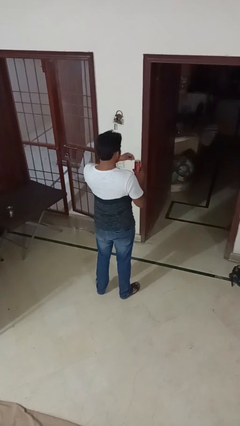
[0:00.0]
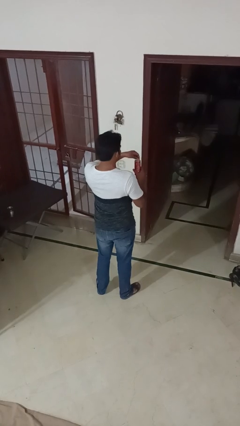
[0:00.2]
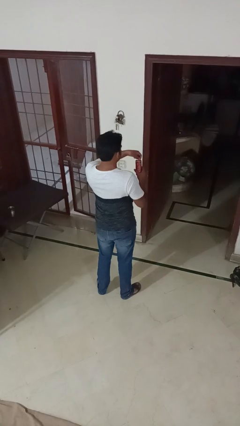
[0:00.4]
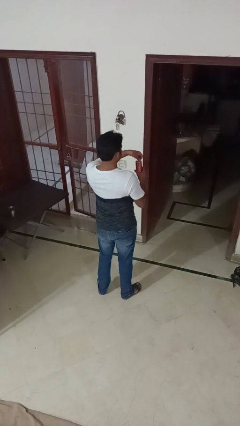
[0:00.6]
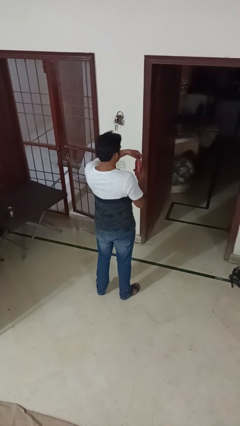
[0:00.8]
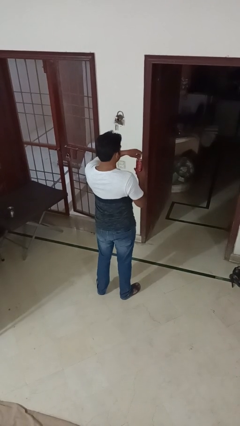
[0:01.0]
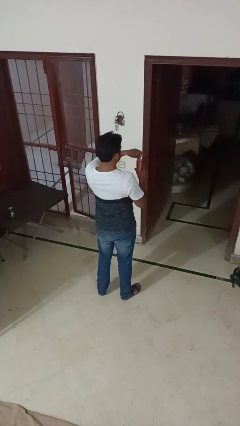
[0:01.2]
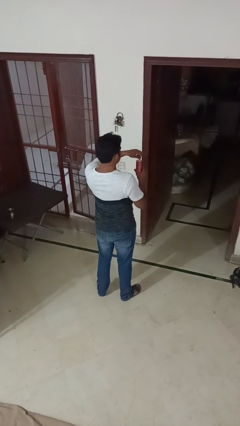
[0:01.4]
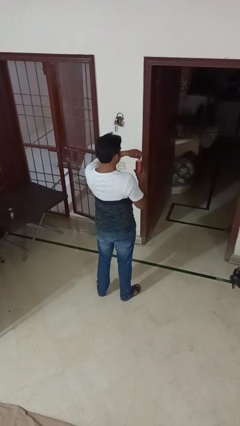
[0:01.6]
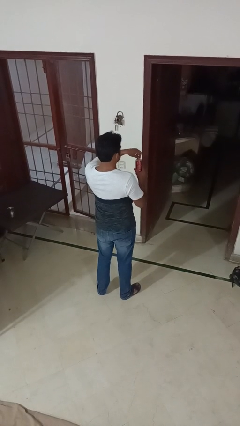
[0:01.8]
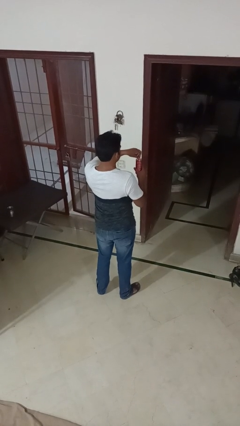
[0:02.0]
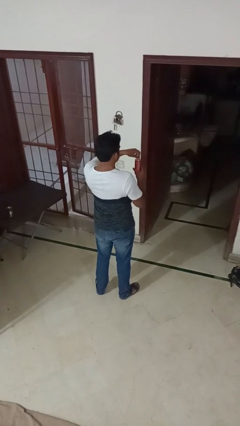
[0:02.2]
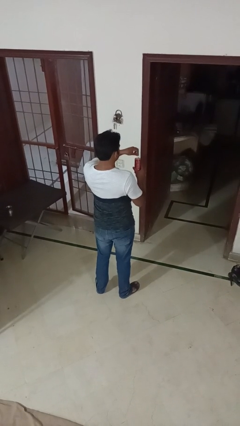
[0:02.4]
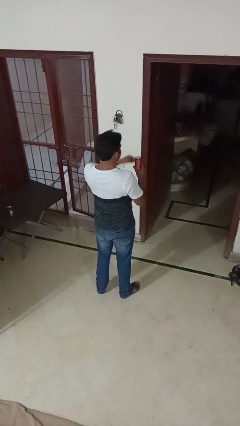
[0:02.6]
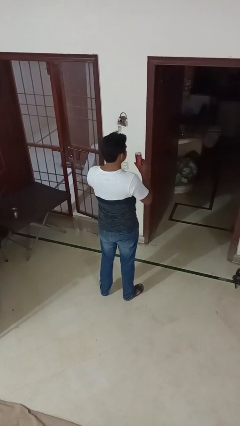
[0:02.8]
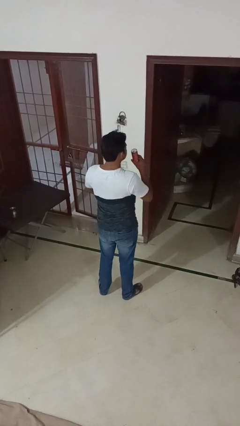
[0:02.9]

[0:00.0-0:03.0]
person opens beverage can

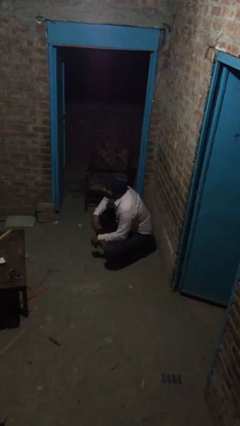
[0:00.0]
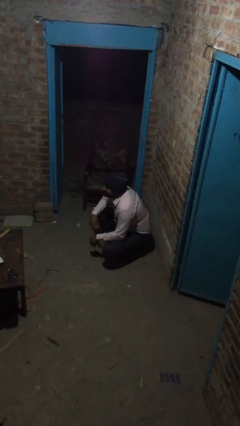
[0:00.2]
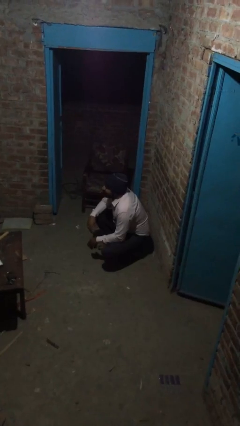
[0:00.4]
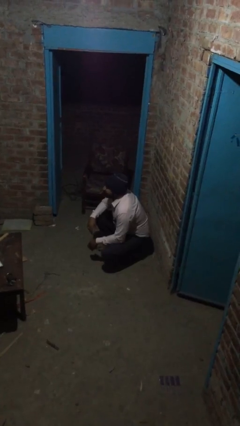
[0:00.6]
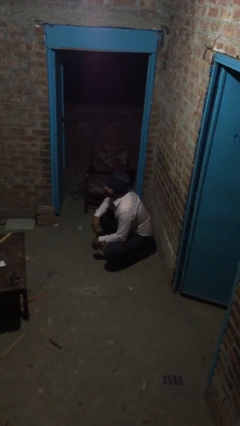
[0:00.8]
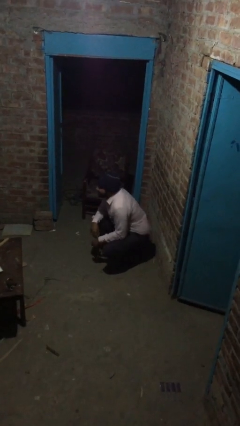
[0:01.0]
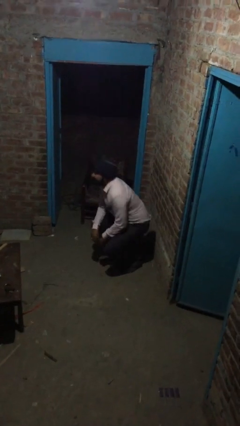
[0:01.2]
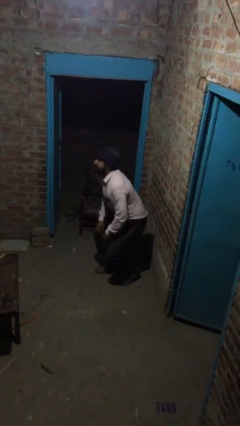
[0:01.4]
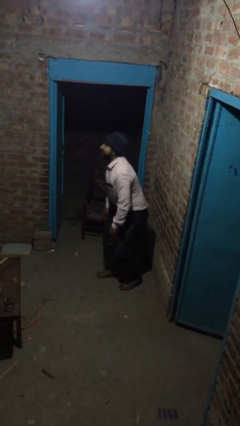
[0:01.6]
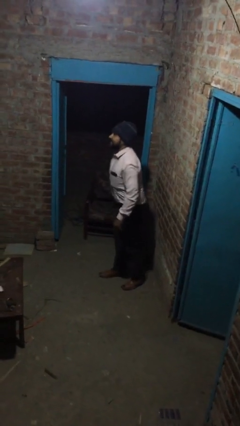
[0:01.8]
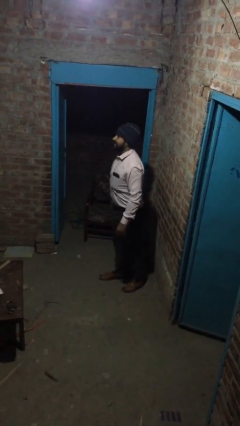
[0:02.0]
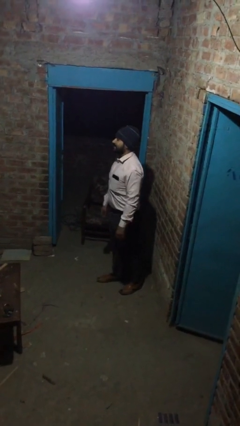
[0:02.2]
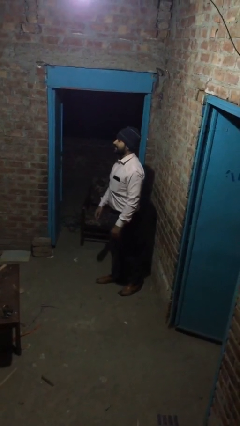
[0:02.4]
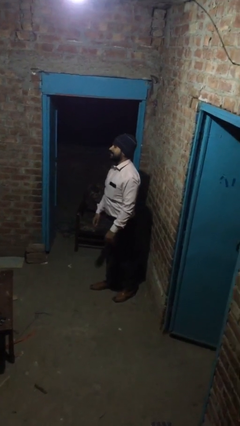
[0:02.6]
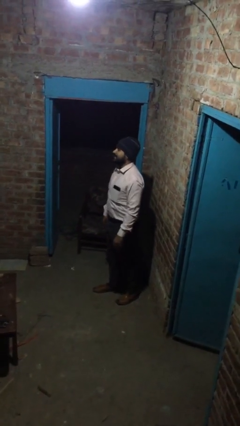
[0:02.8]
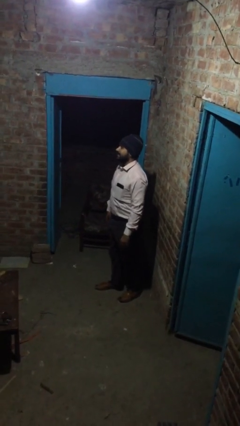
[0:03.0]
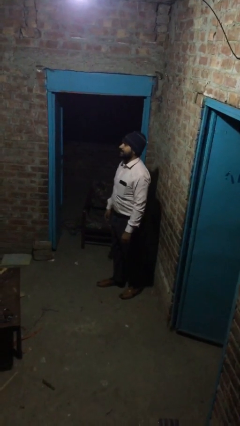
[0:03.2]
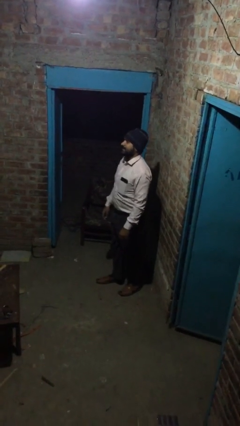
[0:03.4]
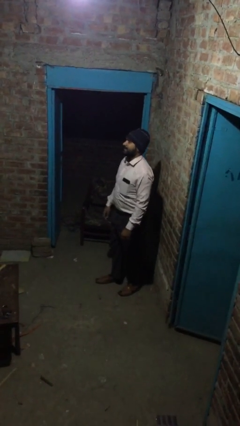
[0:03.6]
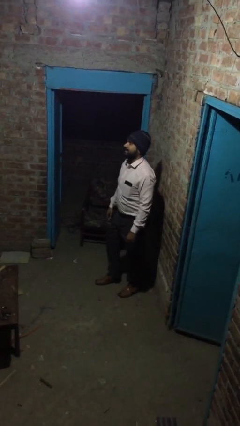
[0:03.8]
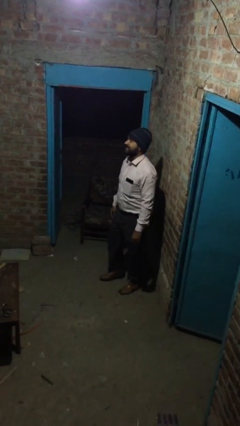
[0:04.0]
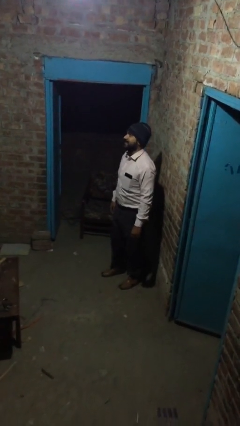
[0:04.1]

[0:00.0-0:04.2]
person stands up

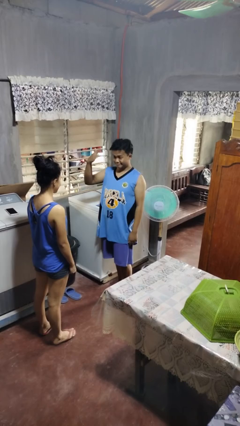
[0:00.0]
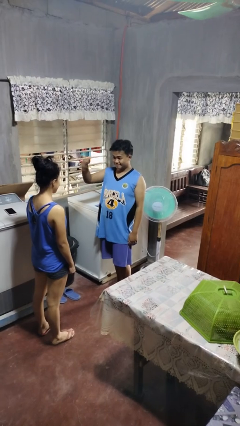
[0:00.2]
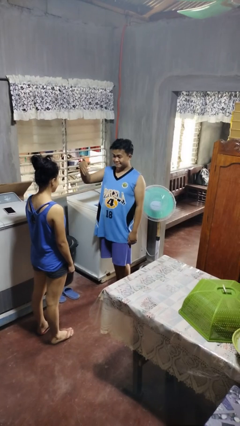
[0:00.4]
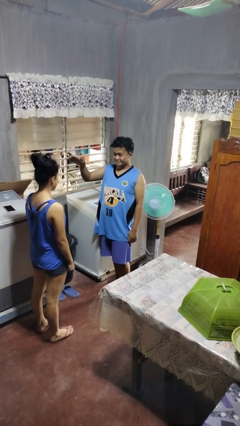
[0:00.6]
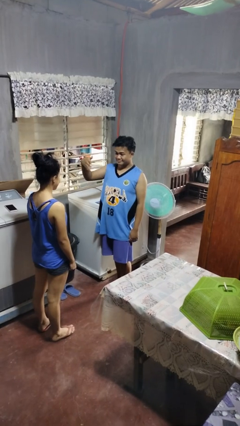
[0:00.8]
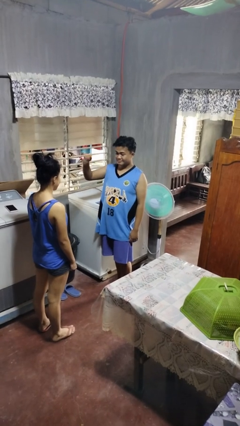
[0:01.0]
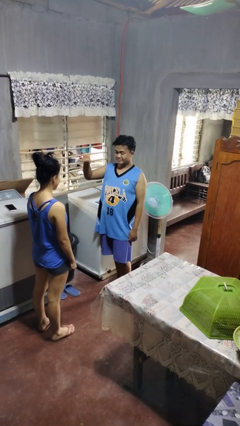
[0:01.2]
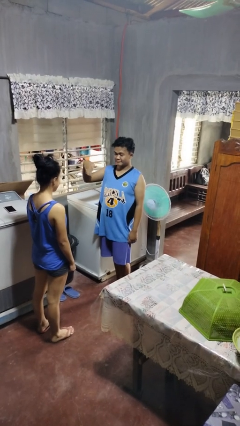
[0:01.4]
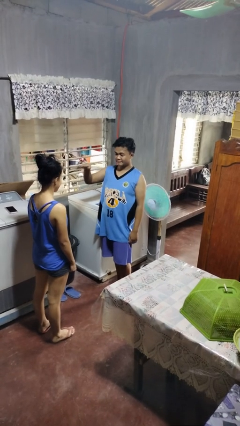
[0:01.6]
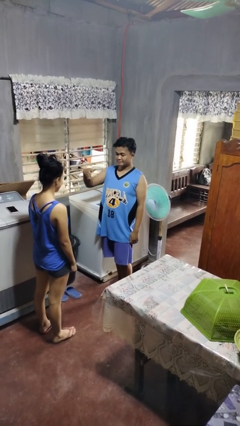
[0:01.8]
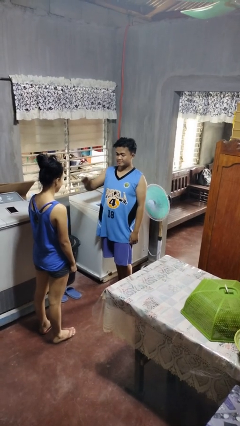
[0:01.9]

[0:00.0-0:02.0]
person shoves person

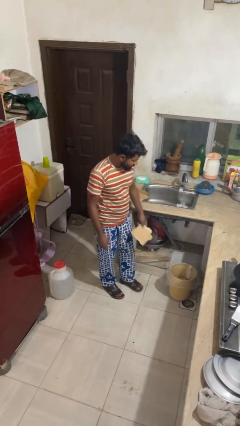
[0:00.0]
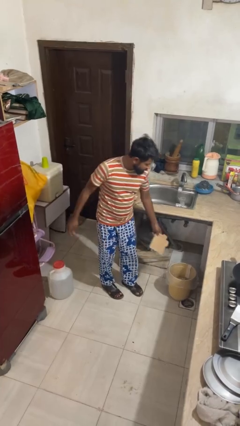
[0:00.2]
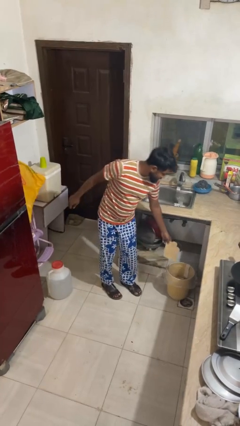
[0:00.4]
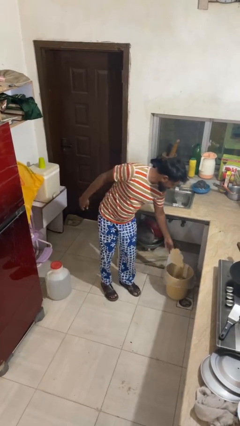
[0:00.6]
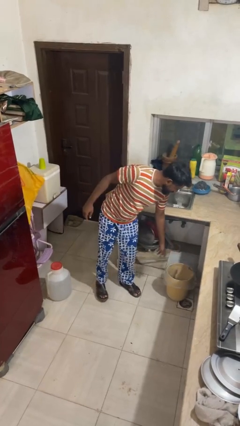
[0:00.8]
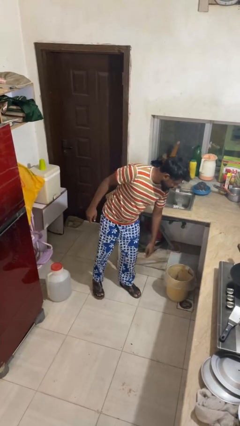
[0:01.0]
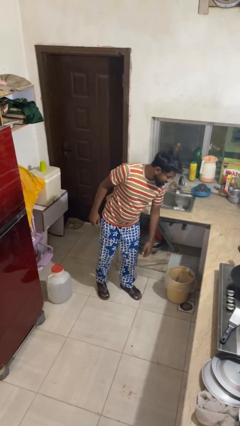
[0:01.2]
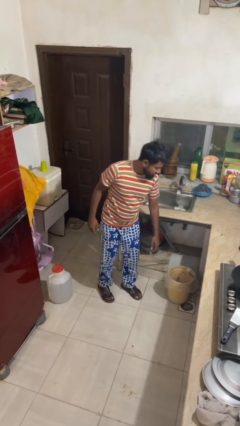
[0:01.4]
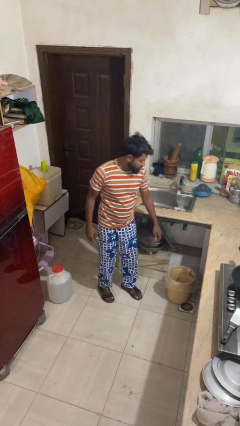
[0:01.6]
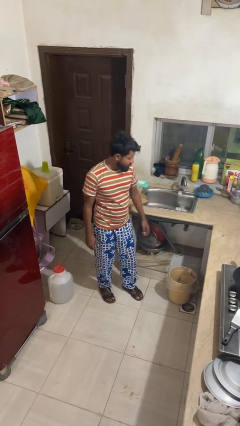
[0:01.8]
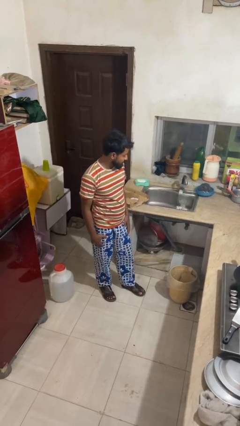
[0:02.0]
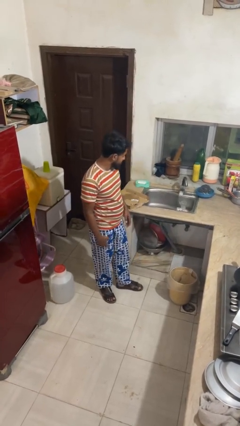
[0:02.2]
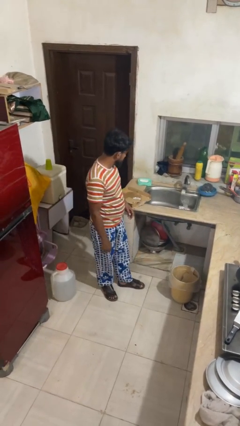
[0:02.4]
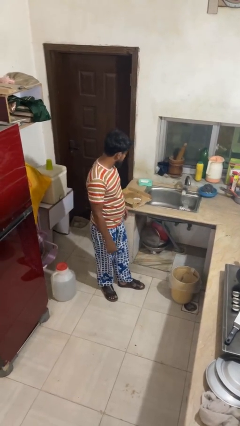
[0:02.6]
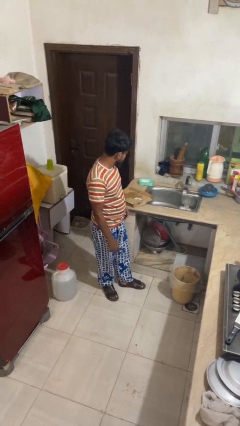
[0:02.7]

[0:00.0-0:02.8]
person discards trash

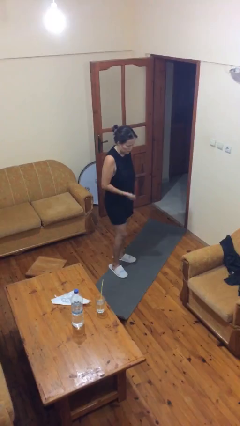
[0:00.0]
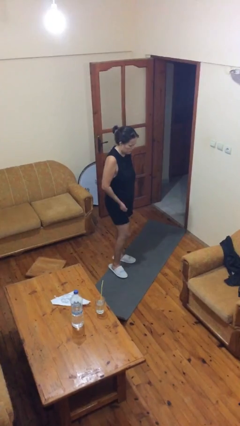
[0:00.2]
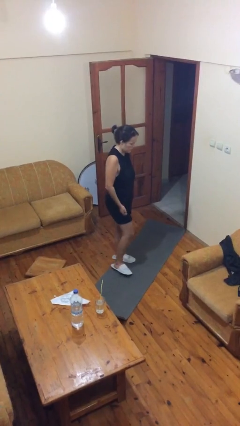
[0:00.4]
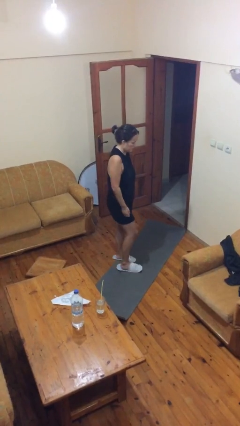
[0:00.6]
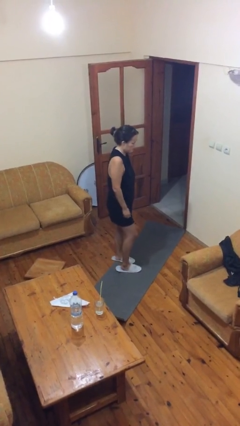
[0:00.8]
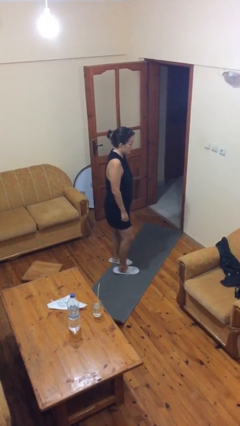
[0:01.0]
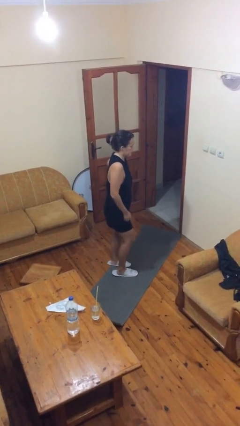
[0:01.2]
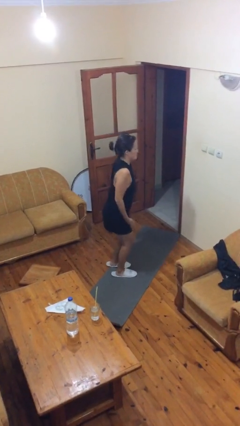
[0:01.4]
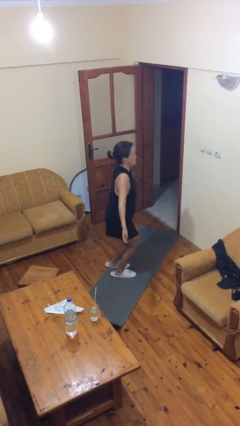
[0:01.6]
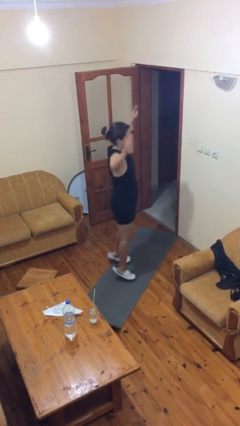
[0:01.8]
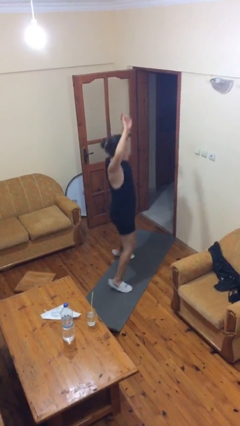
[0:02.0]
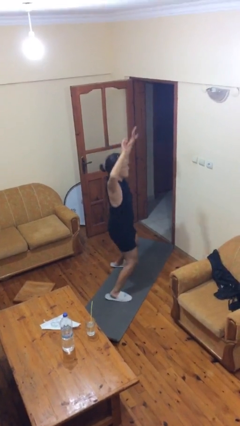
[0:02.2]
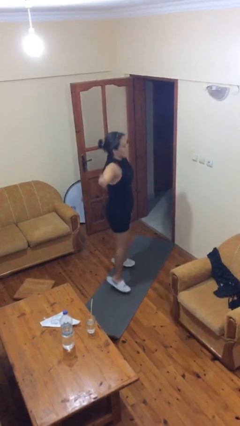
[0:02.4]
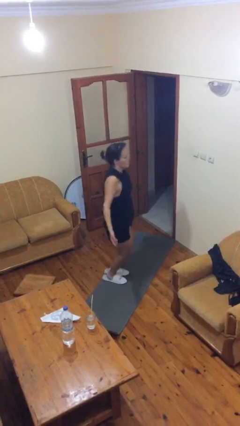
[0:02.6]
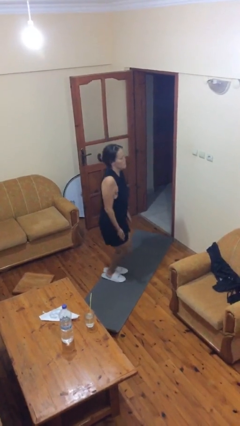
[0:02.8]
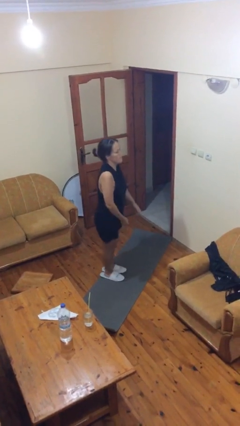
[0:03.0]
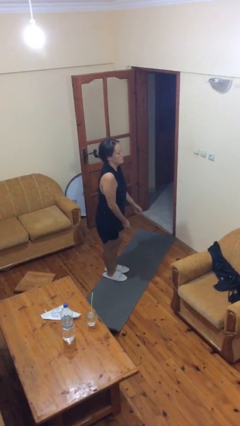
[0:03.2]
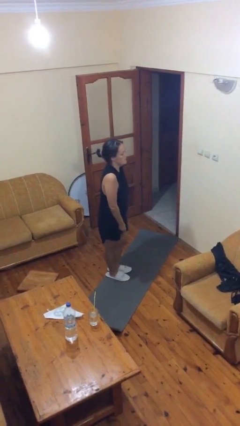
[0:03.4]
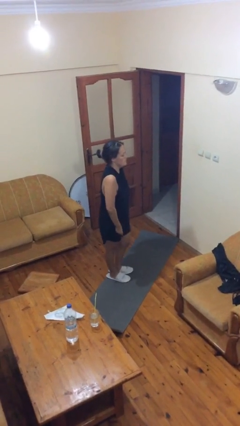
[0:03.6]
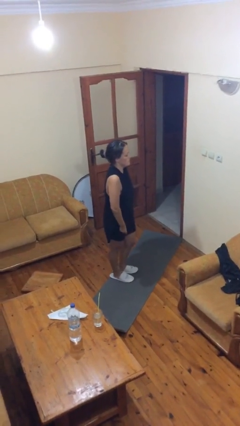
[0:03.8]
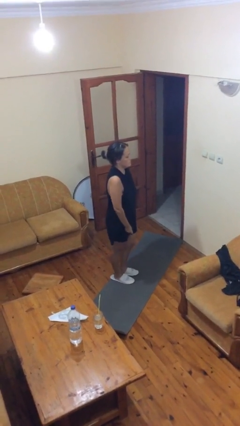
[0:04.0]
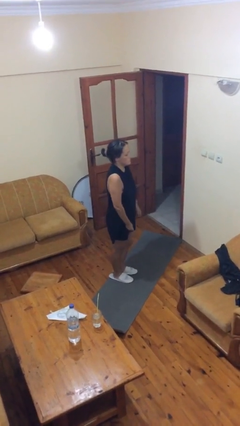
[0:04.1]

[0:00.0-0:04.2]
person exercises with jumping jacks

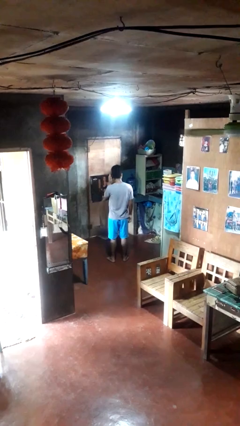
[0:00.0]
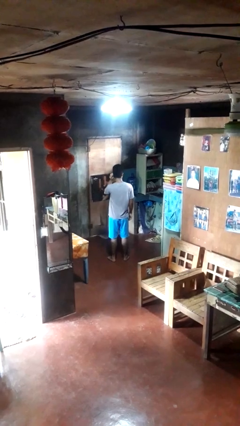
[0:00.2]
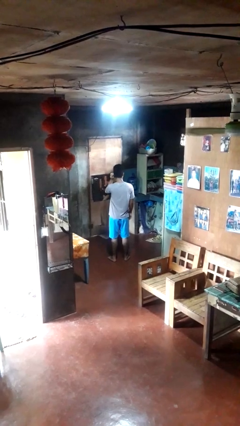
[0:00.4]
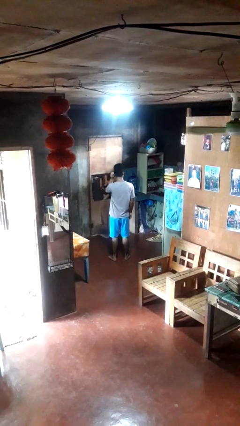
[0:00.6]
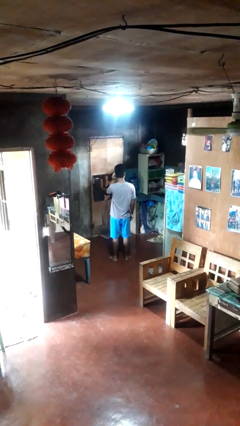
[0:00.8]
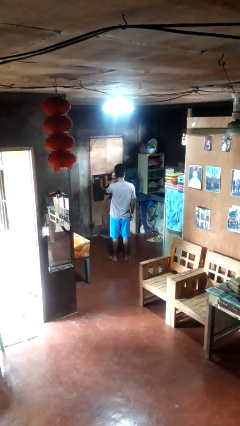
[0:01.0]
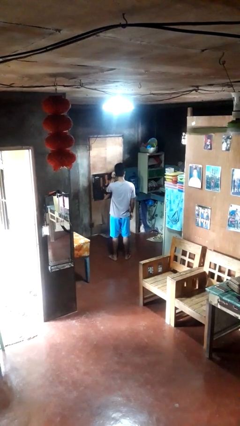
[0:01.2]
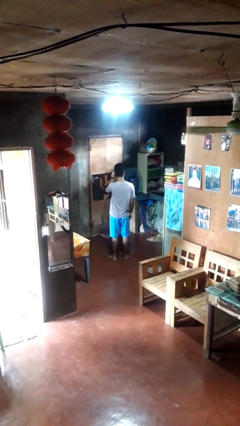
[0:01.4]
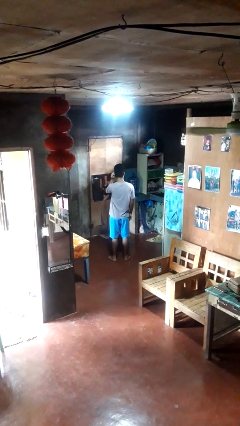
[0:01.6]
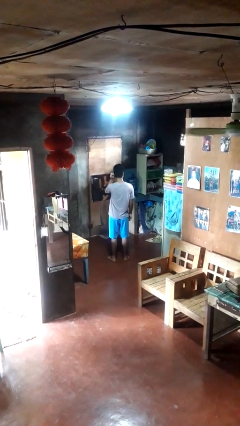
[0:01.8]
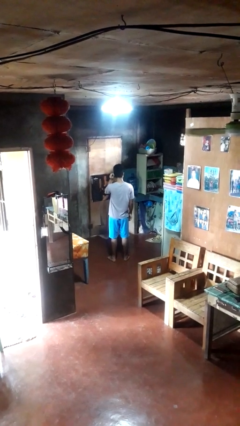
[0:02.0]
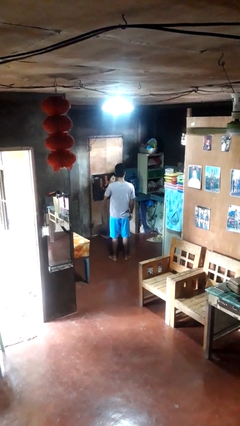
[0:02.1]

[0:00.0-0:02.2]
person touches earlobe
